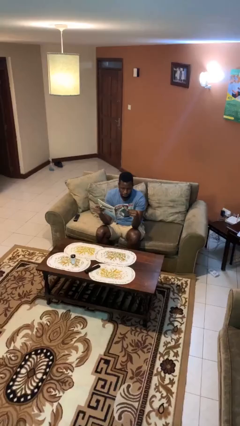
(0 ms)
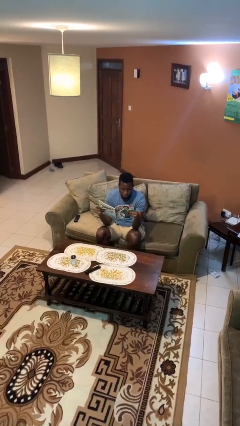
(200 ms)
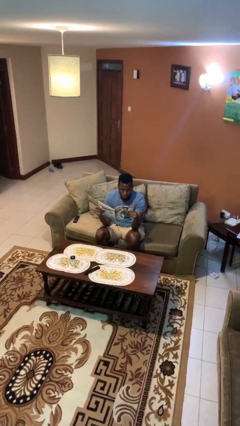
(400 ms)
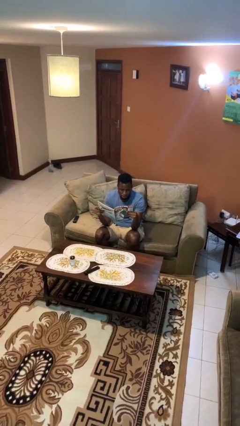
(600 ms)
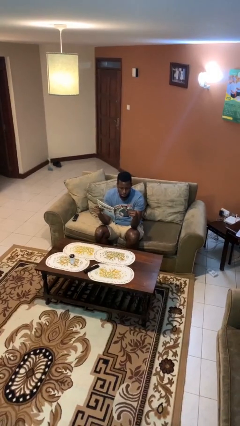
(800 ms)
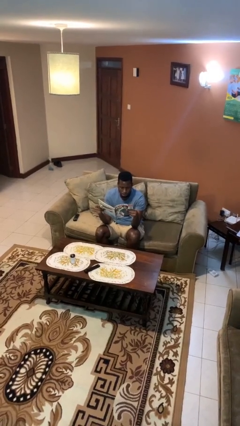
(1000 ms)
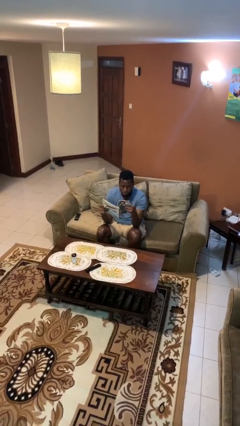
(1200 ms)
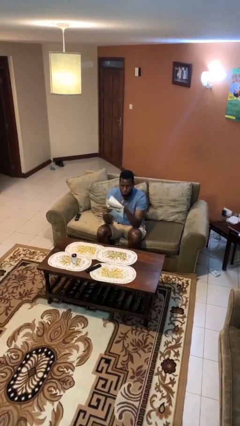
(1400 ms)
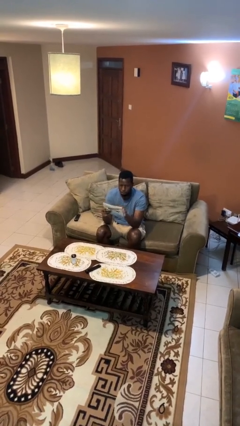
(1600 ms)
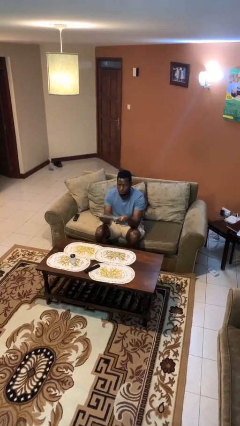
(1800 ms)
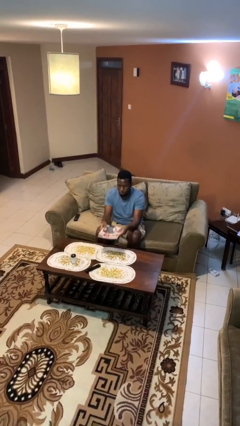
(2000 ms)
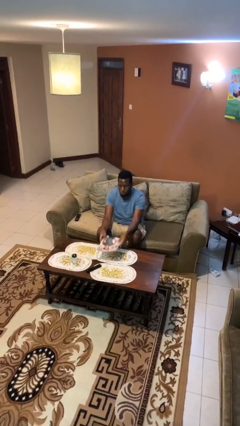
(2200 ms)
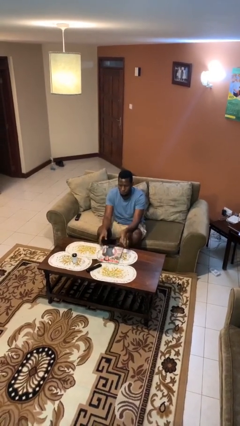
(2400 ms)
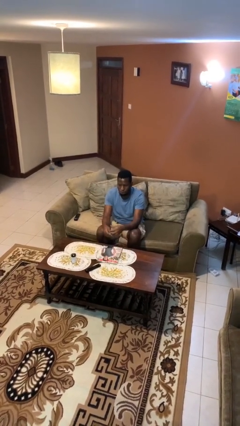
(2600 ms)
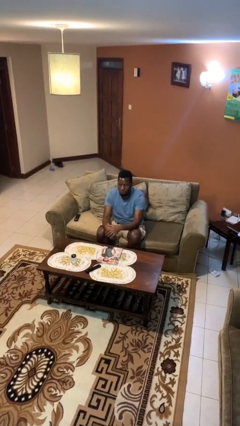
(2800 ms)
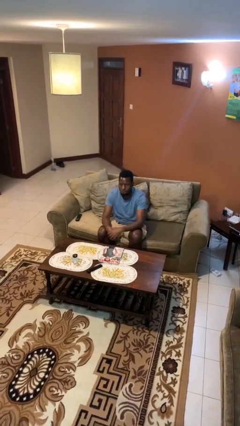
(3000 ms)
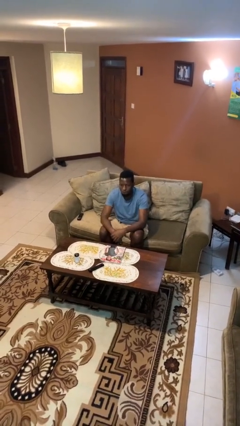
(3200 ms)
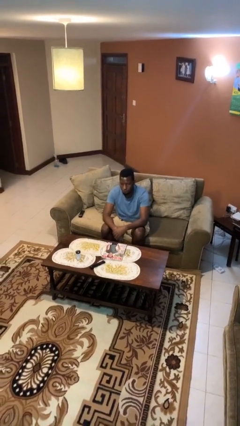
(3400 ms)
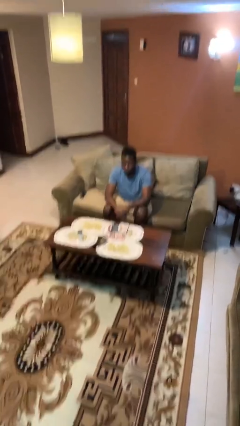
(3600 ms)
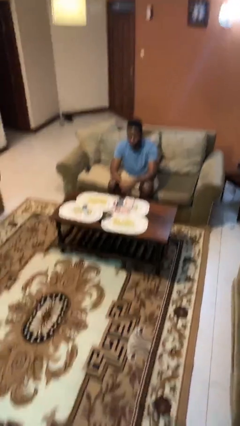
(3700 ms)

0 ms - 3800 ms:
person puts down object on table

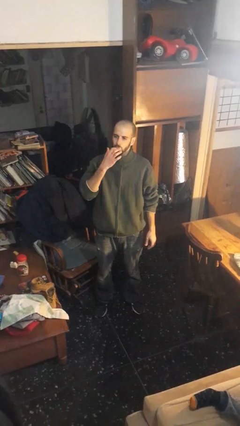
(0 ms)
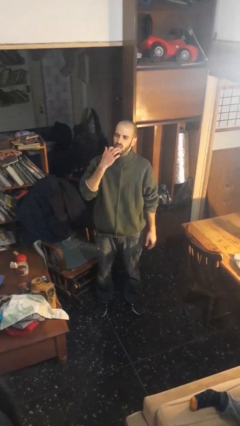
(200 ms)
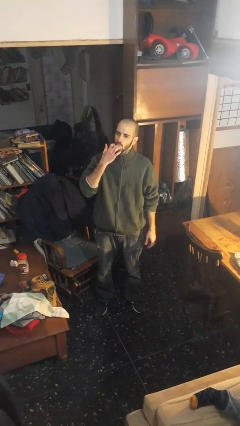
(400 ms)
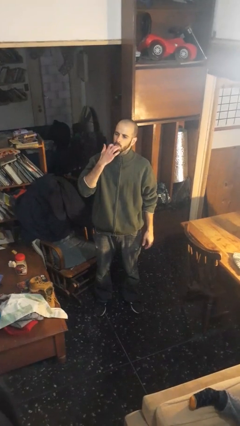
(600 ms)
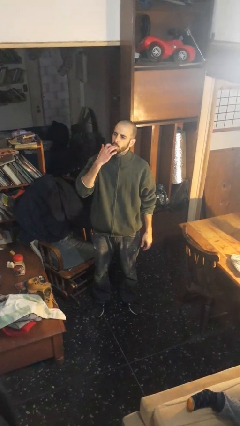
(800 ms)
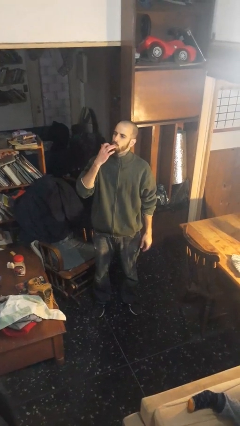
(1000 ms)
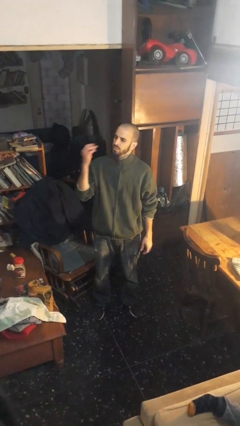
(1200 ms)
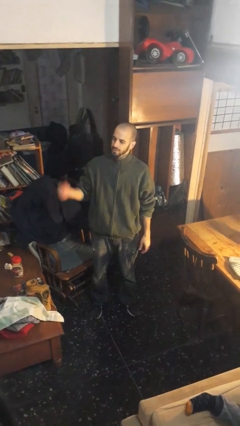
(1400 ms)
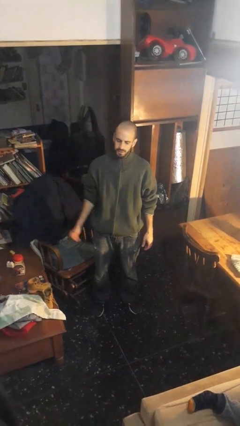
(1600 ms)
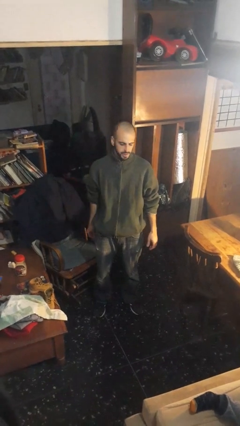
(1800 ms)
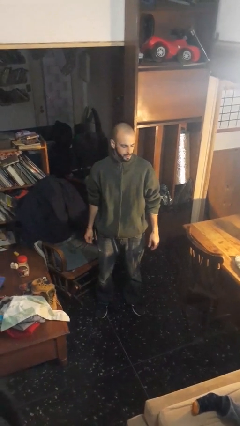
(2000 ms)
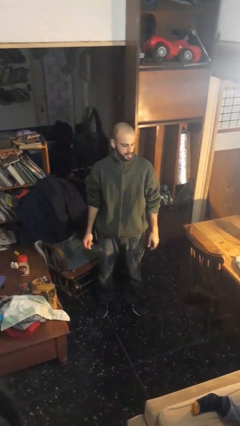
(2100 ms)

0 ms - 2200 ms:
person licks fingers

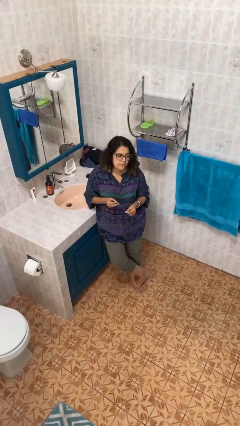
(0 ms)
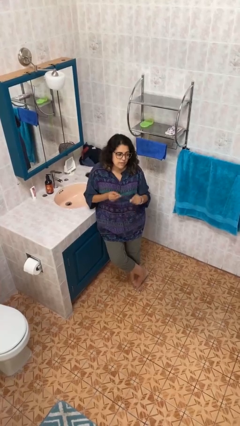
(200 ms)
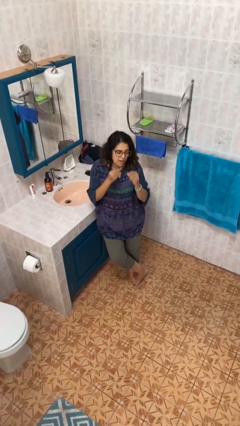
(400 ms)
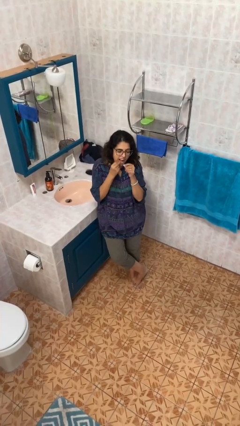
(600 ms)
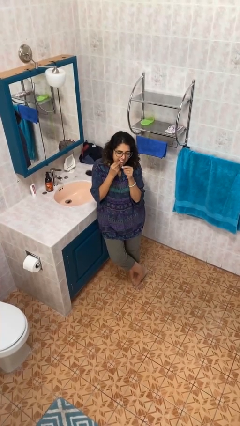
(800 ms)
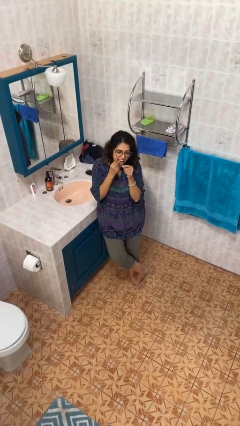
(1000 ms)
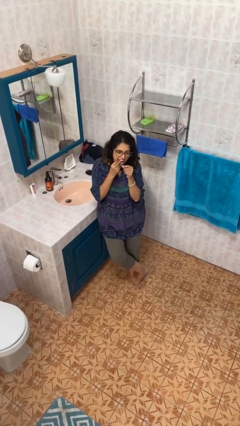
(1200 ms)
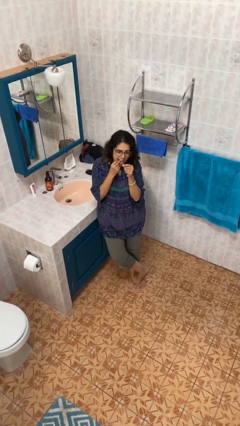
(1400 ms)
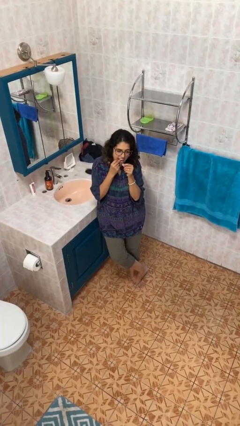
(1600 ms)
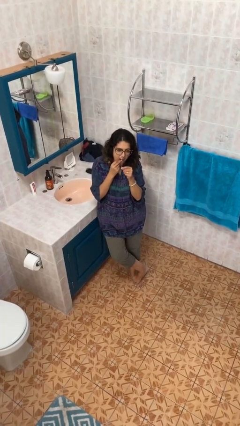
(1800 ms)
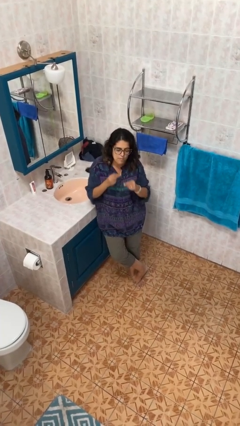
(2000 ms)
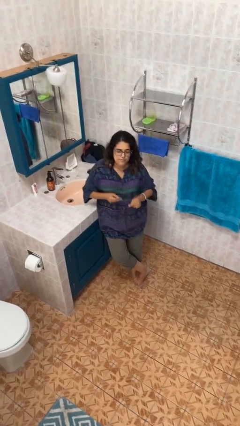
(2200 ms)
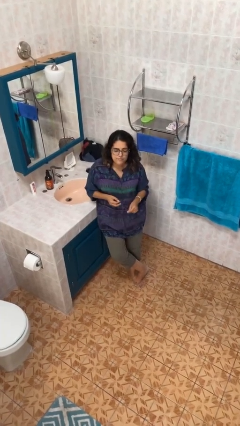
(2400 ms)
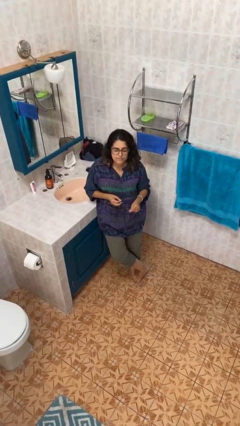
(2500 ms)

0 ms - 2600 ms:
person flosses

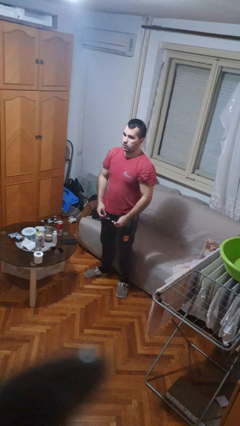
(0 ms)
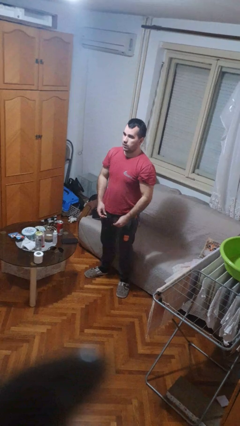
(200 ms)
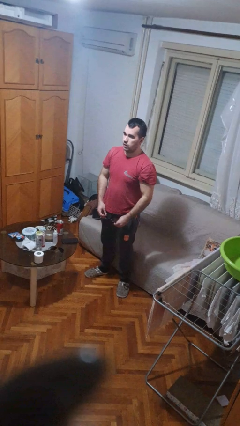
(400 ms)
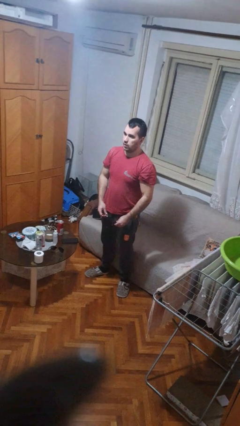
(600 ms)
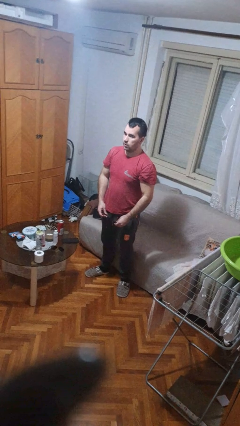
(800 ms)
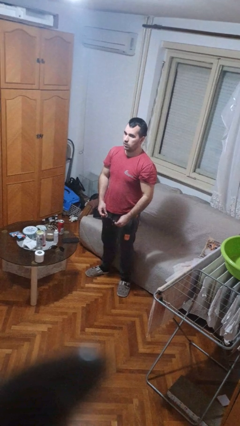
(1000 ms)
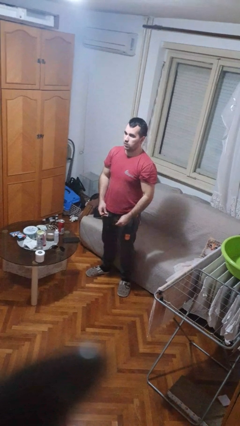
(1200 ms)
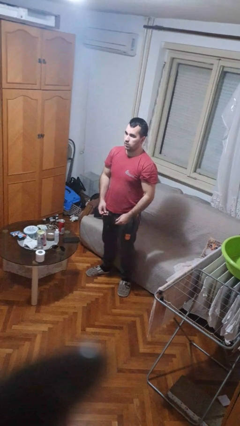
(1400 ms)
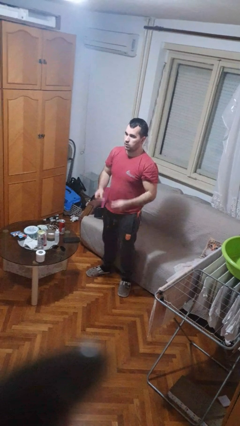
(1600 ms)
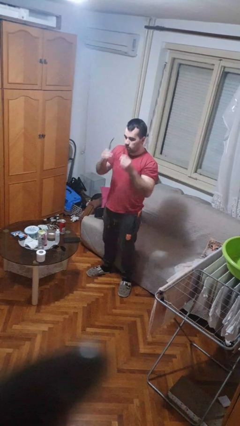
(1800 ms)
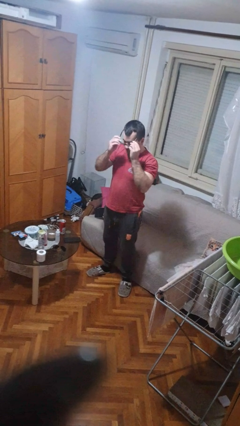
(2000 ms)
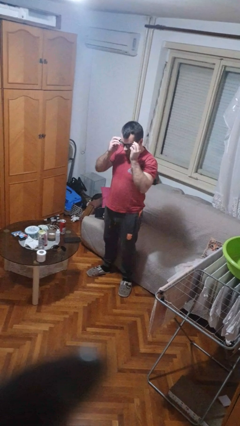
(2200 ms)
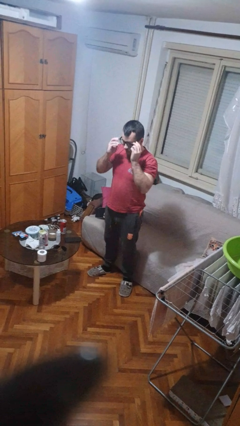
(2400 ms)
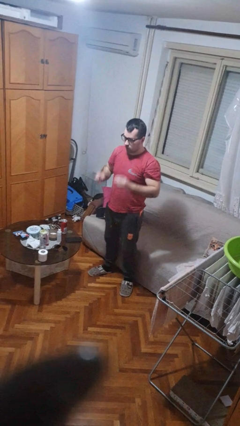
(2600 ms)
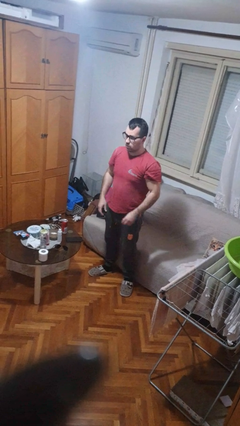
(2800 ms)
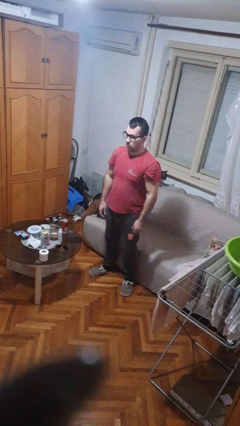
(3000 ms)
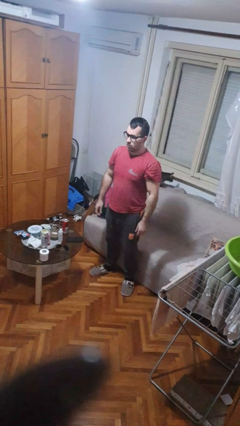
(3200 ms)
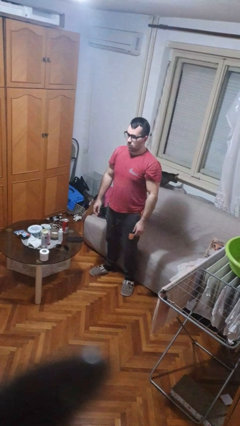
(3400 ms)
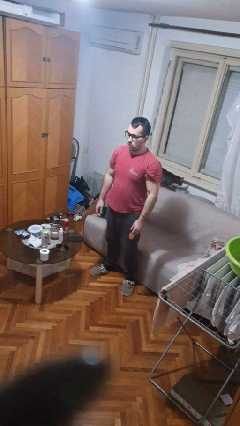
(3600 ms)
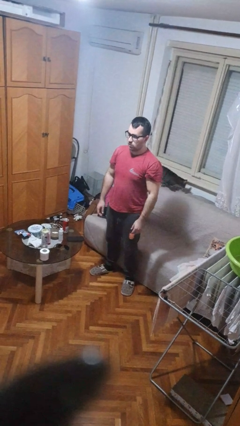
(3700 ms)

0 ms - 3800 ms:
person puts on glasses

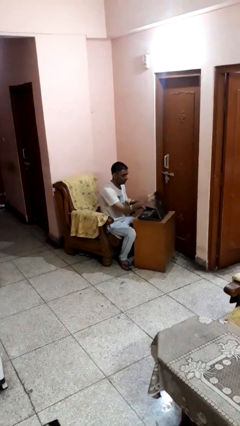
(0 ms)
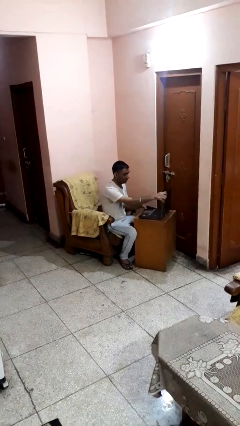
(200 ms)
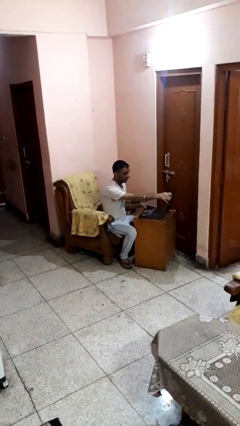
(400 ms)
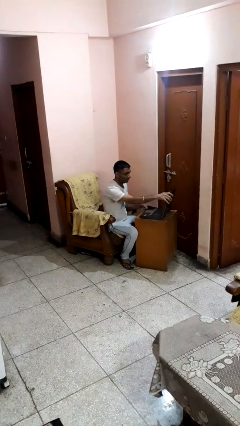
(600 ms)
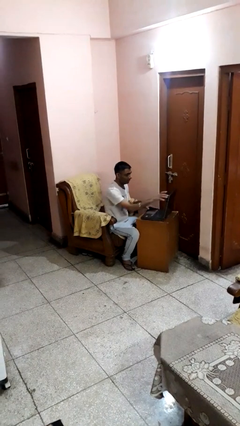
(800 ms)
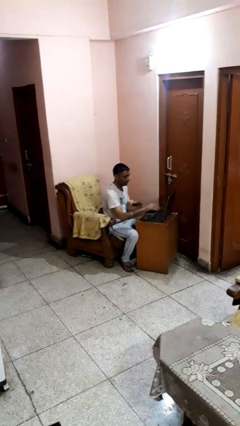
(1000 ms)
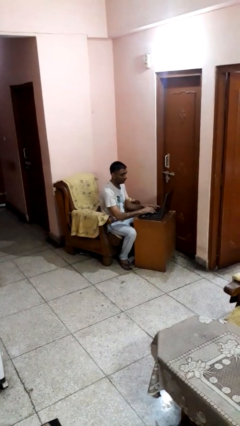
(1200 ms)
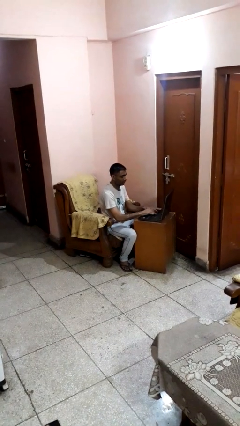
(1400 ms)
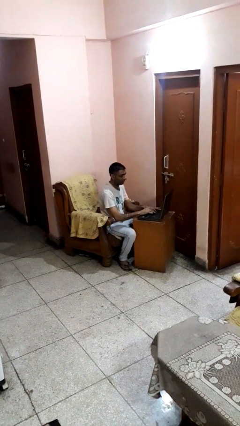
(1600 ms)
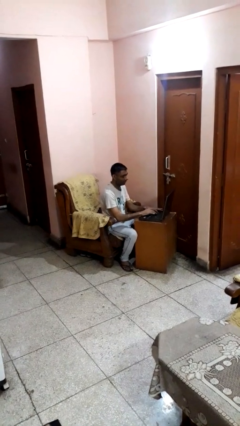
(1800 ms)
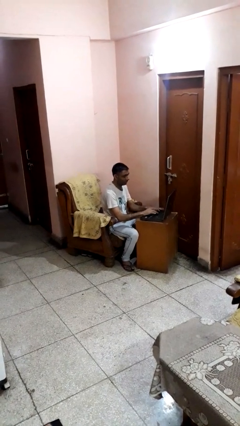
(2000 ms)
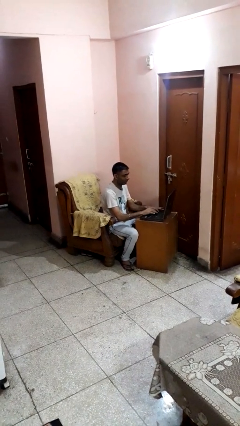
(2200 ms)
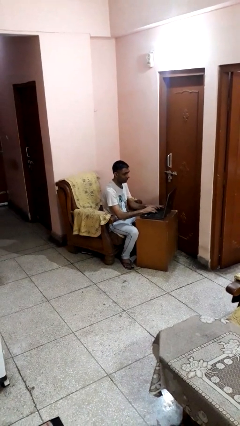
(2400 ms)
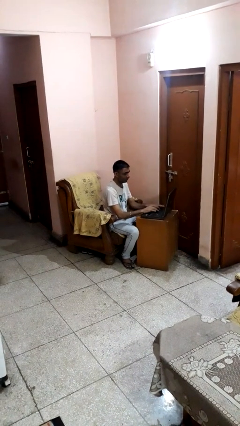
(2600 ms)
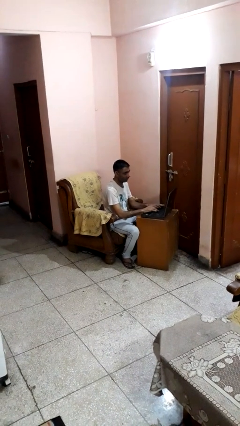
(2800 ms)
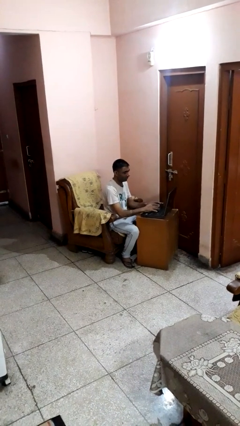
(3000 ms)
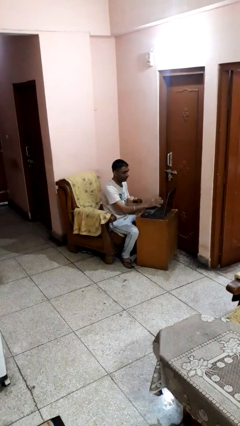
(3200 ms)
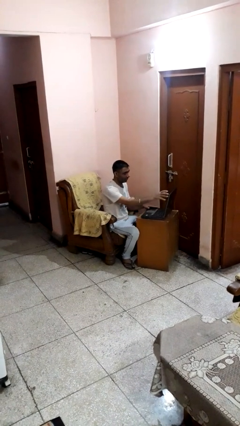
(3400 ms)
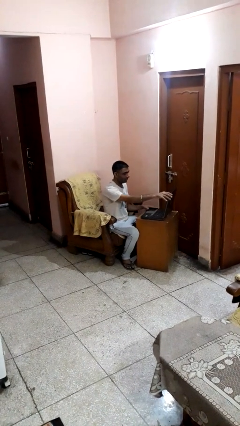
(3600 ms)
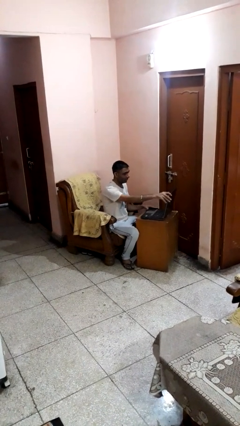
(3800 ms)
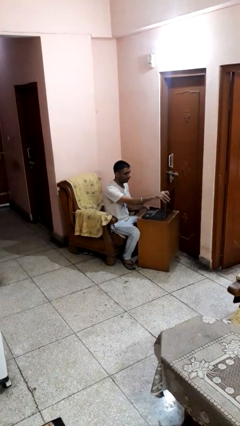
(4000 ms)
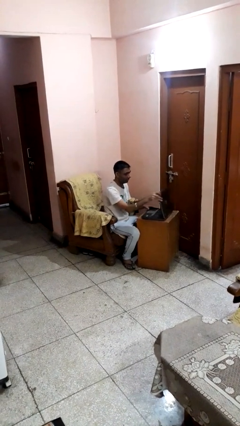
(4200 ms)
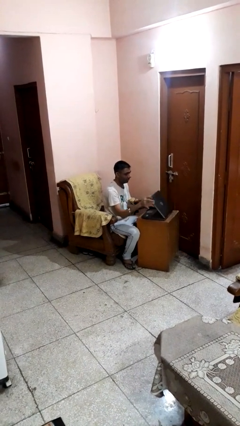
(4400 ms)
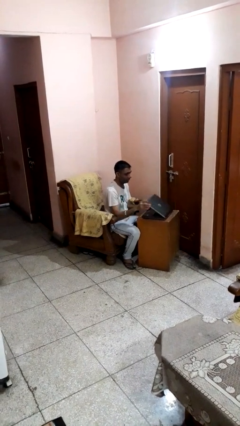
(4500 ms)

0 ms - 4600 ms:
person interacts with laptop

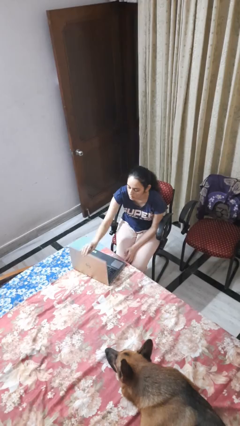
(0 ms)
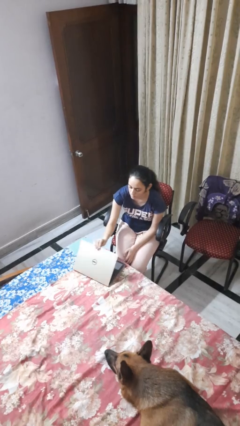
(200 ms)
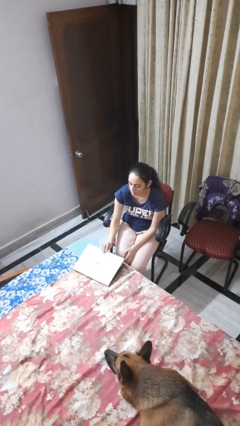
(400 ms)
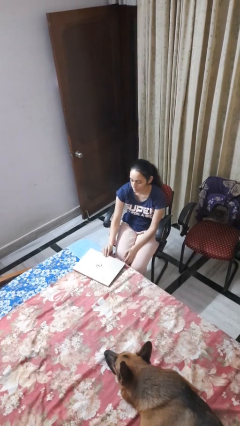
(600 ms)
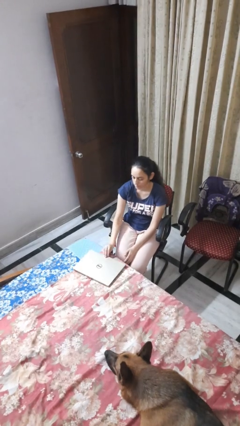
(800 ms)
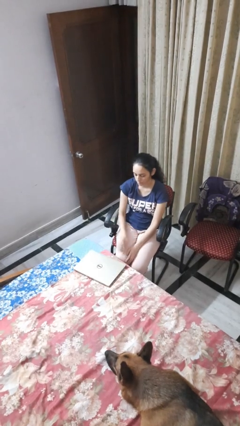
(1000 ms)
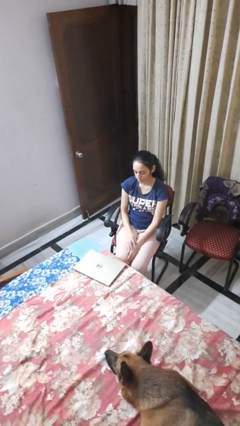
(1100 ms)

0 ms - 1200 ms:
person closes laptop
